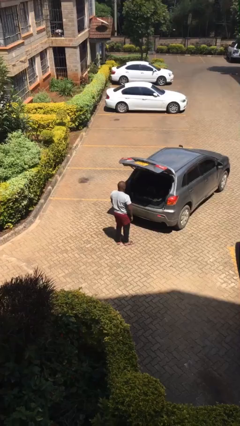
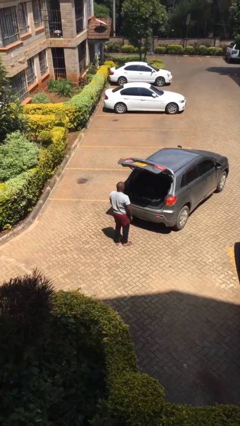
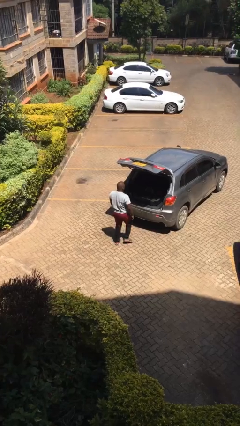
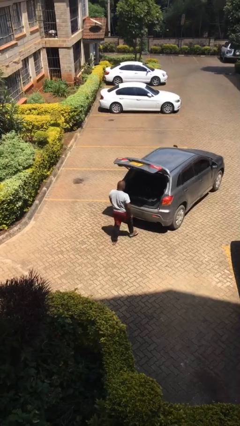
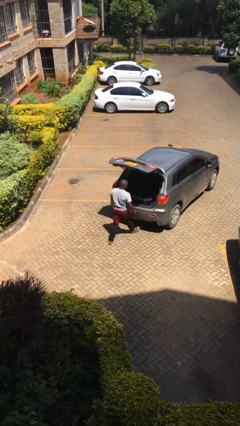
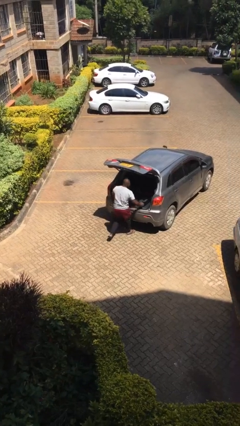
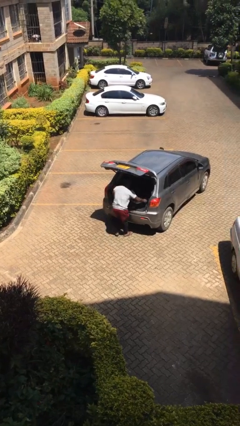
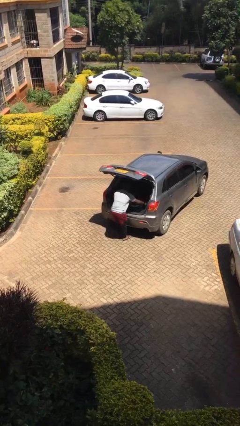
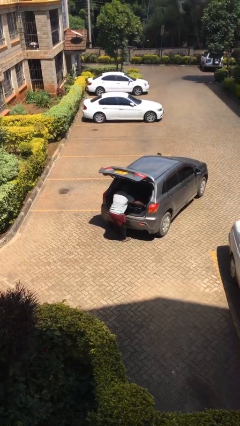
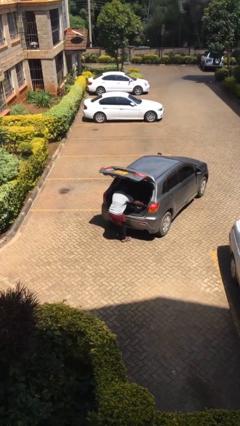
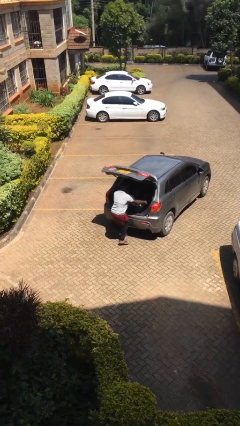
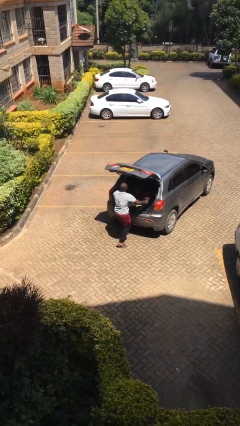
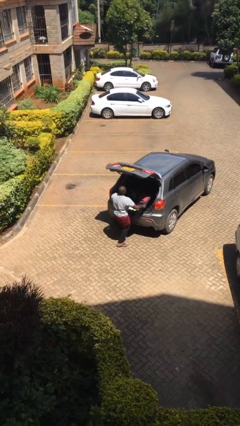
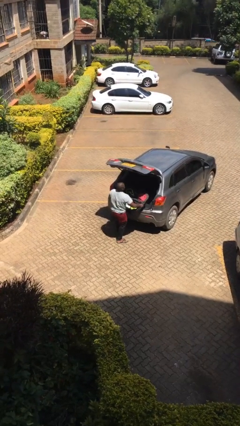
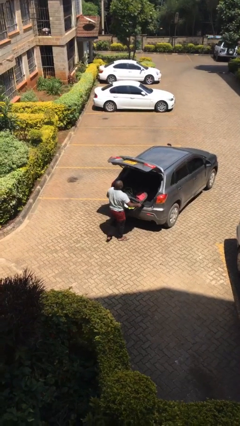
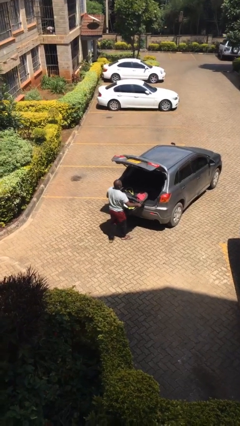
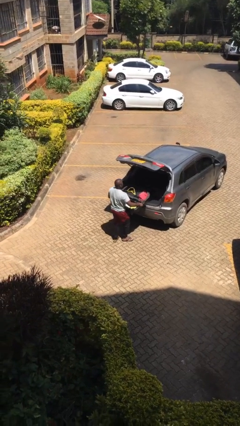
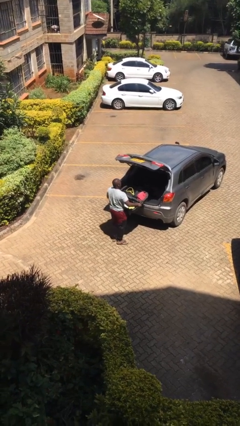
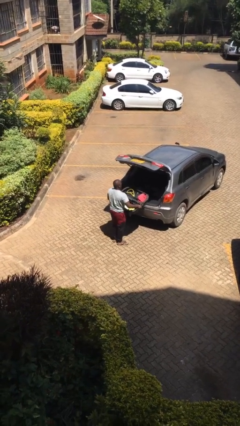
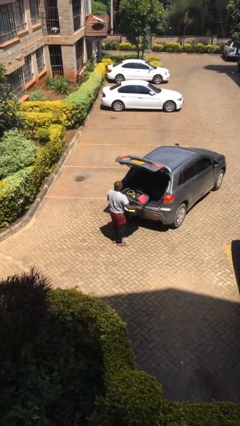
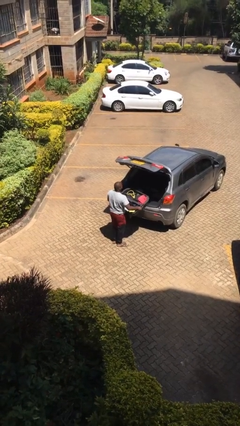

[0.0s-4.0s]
person unloads car

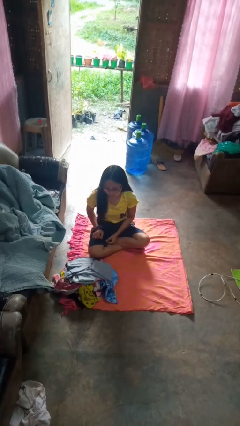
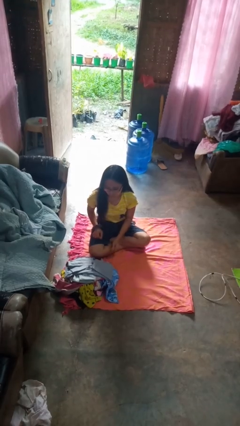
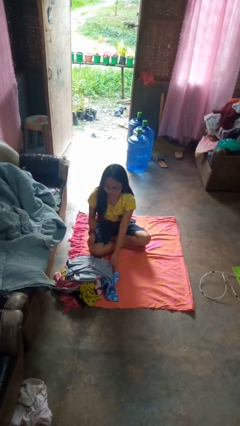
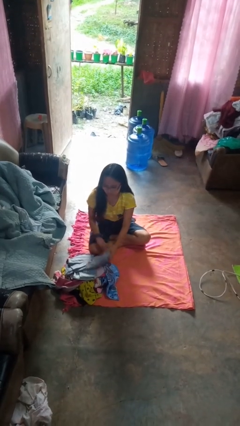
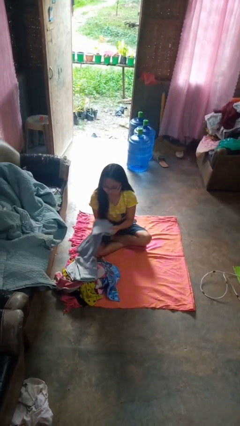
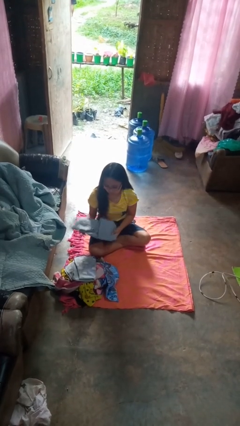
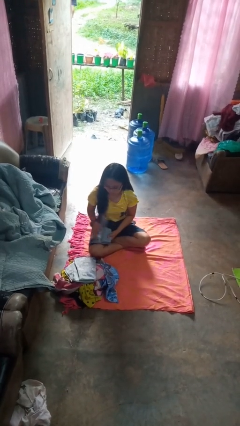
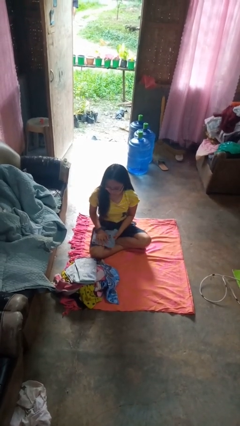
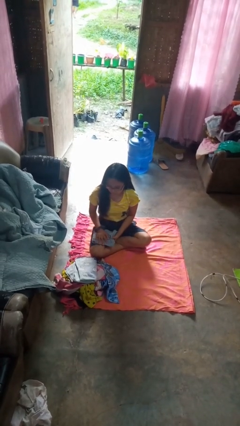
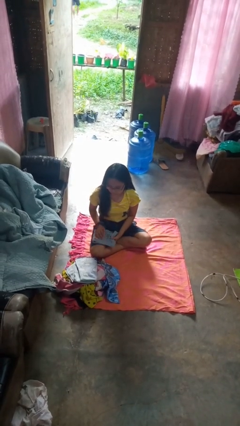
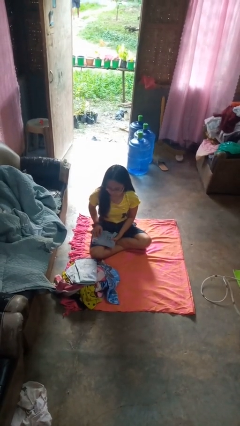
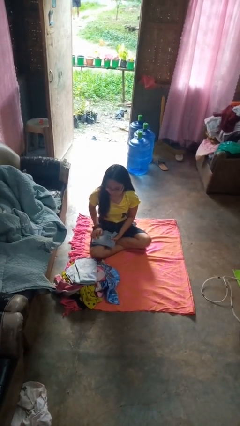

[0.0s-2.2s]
person folds shirt

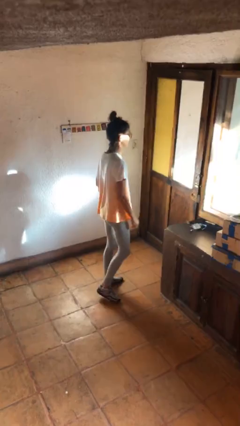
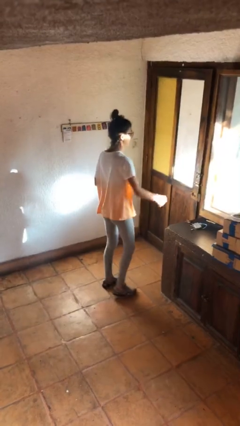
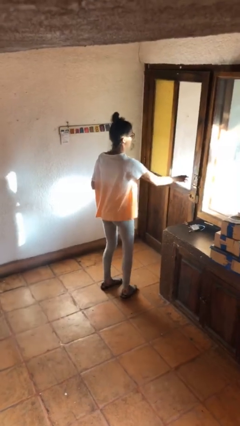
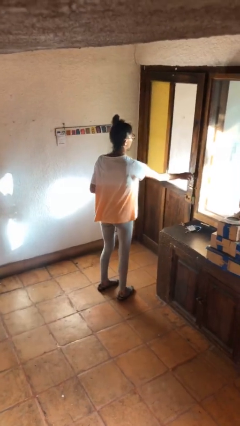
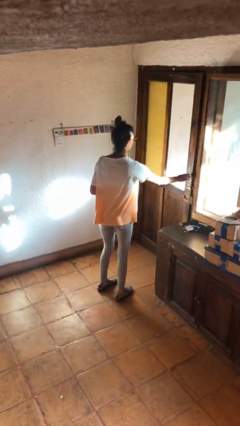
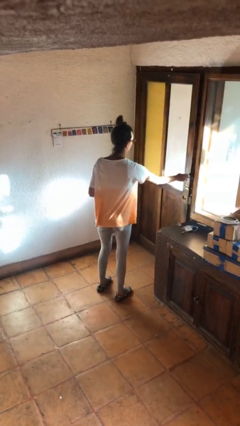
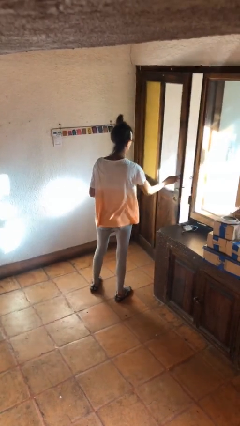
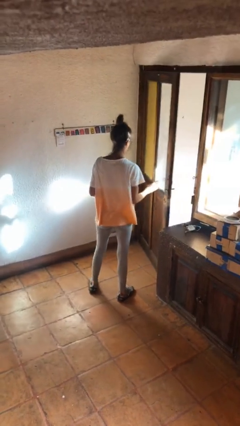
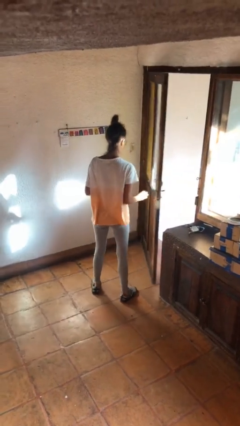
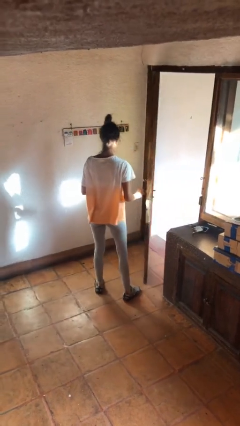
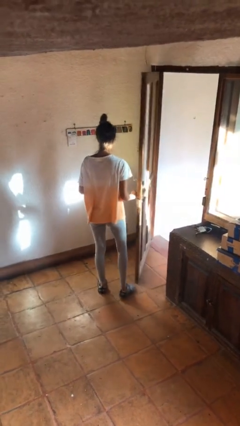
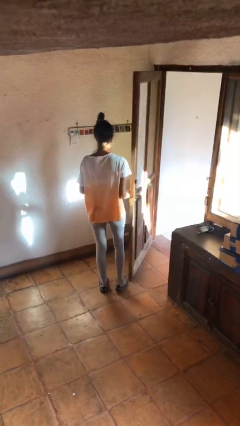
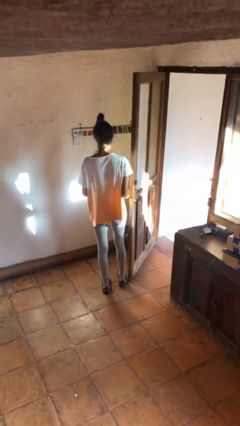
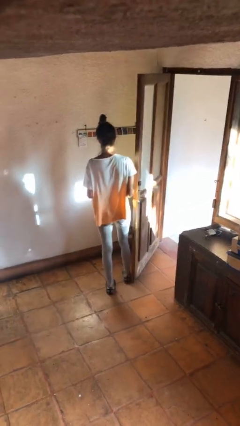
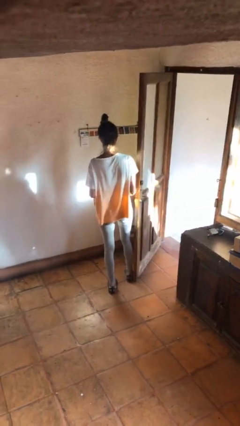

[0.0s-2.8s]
person opens facility door

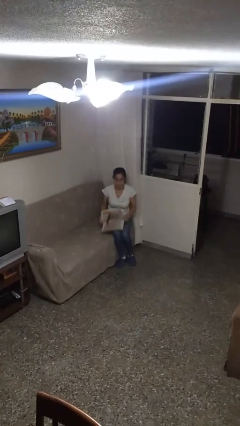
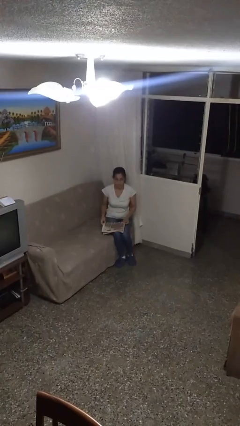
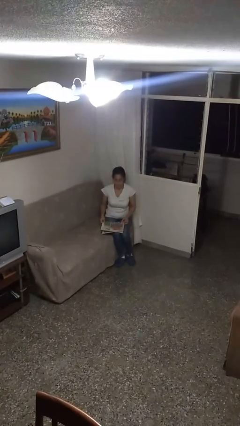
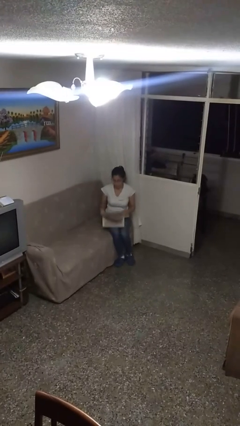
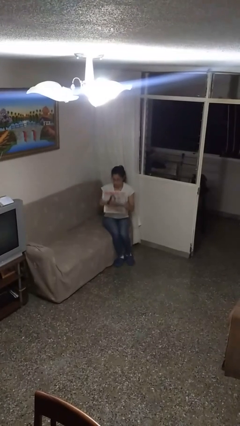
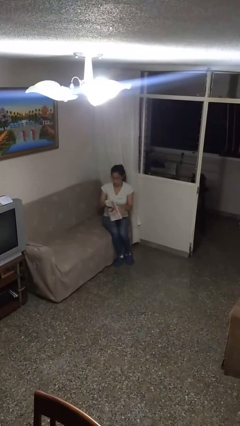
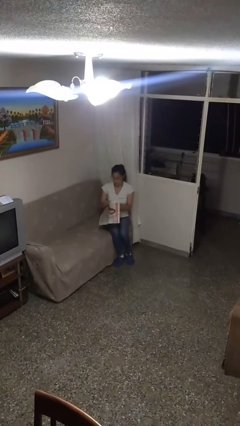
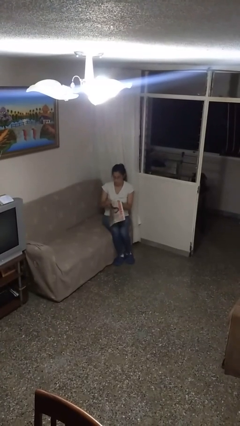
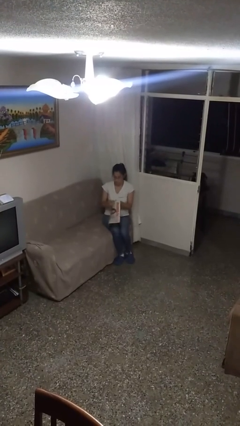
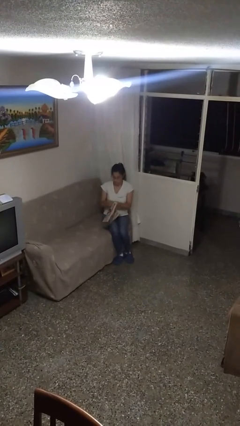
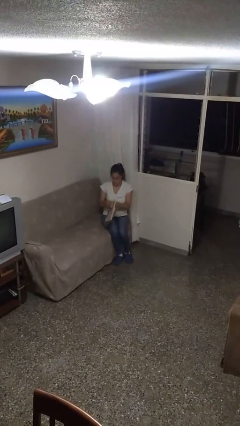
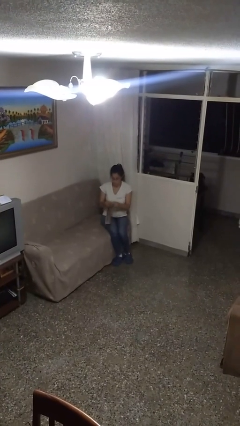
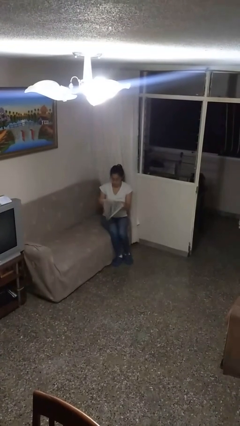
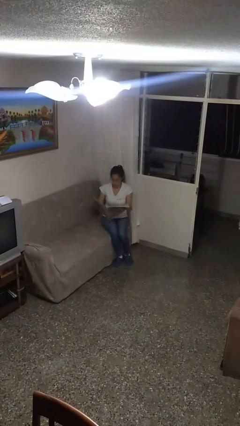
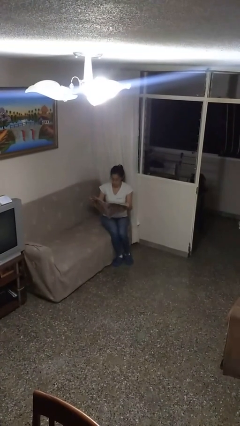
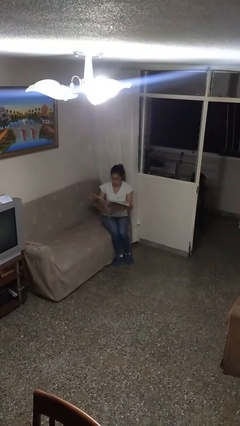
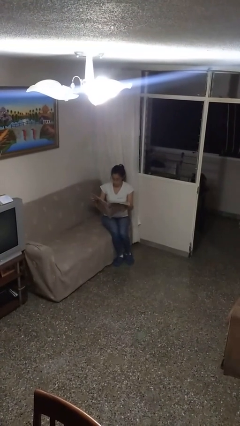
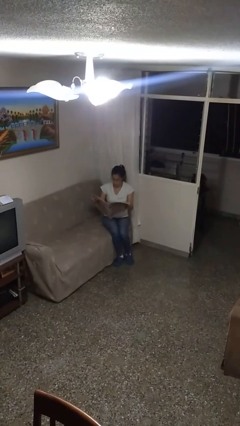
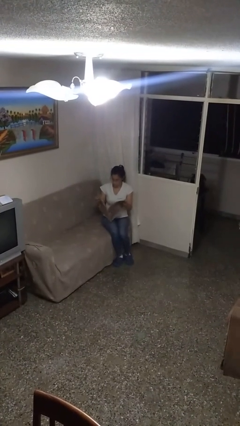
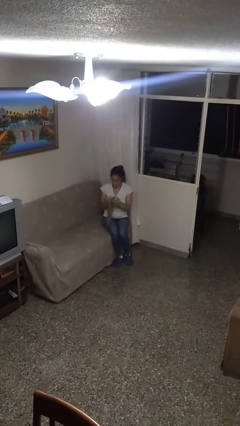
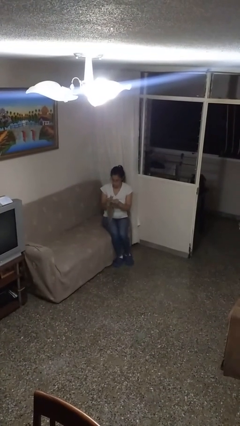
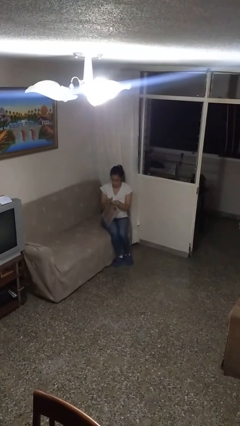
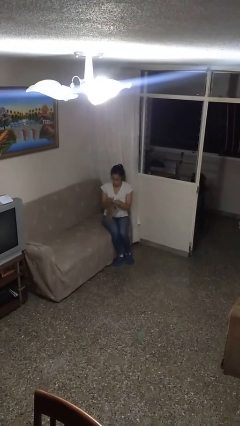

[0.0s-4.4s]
person reads newspaper

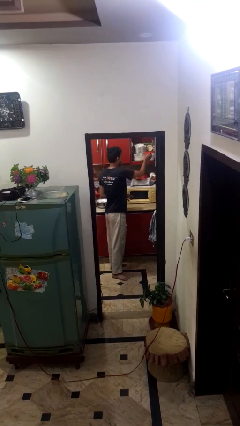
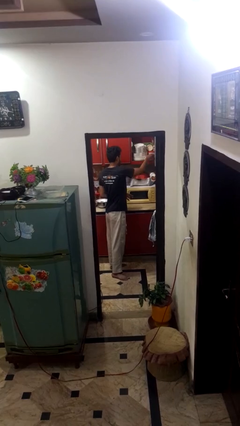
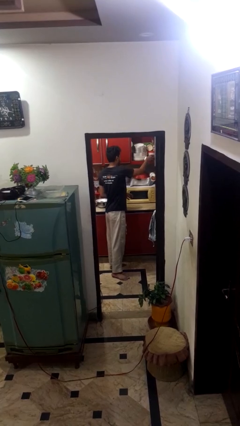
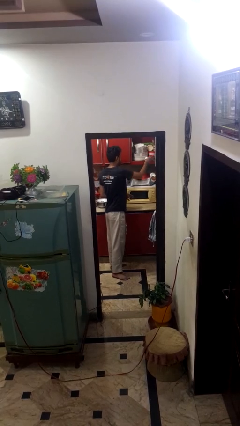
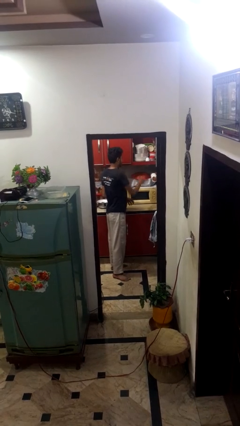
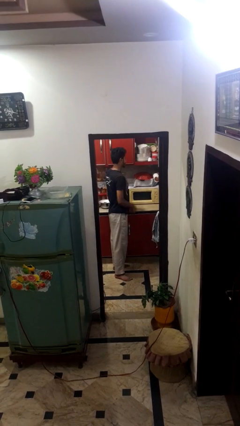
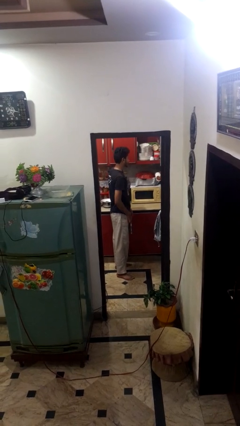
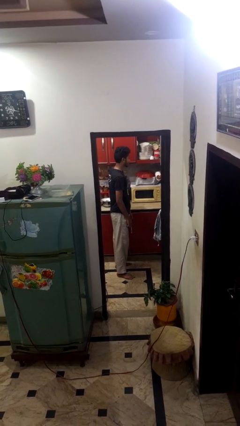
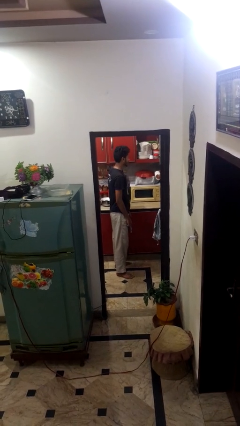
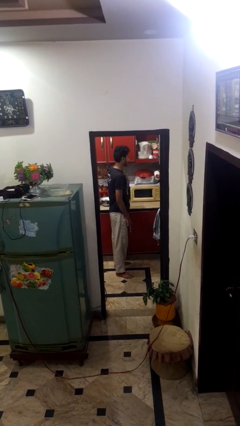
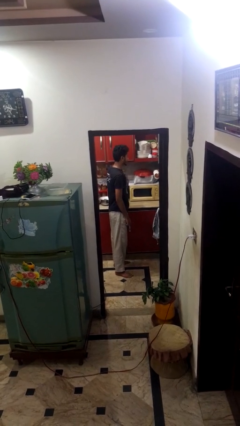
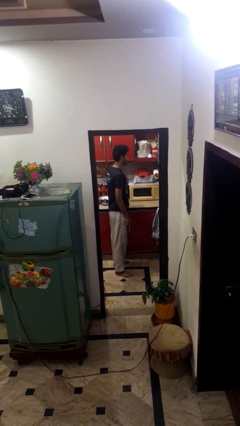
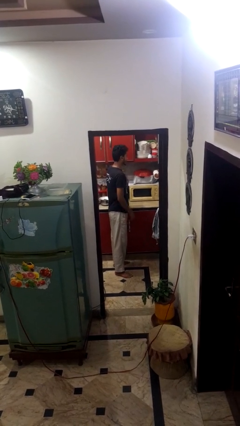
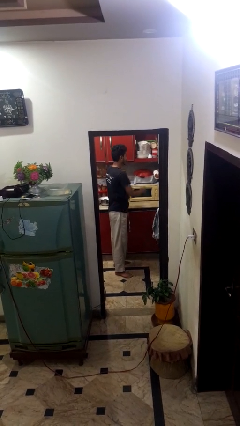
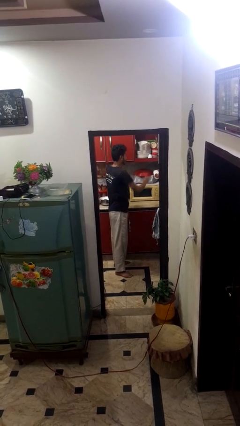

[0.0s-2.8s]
person puts down object into cabinet

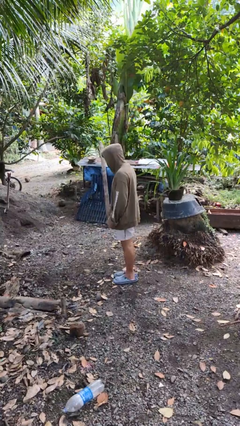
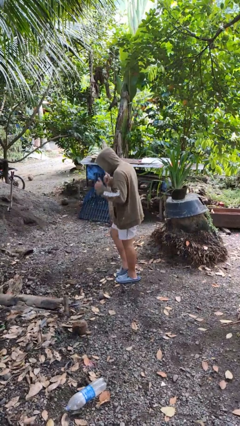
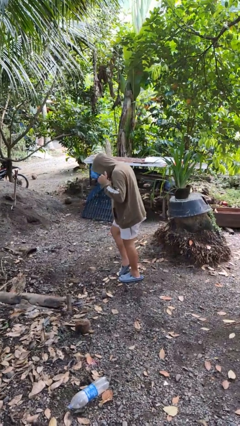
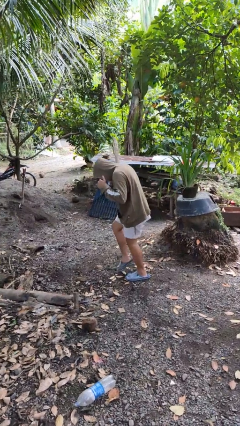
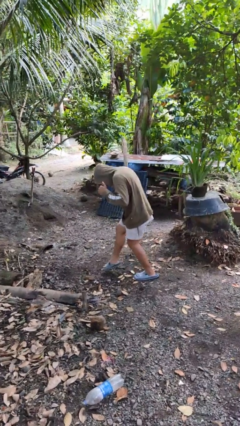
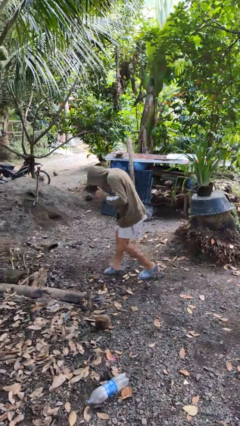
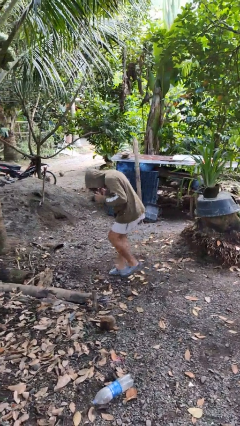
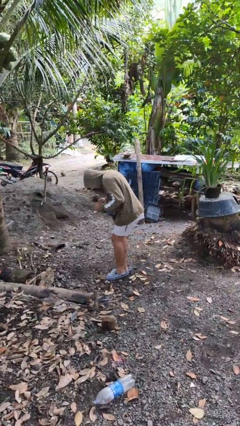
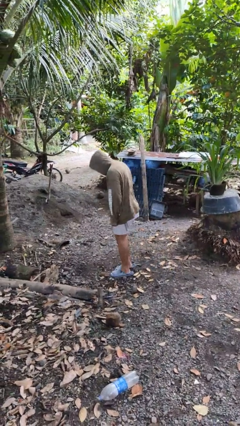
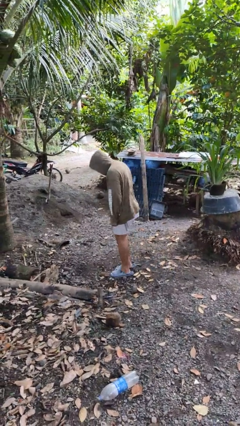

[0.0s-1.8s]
person walks tiptoe
